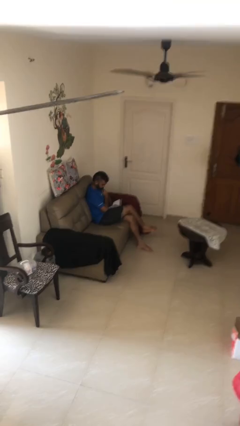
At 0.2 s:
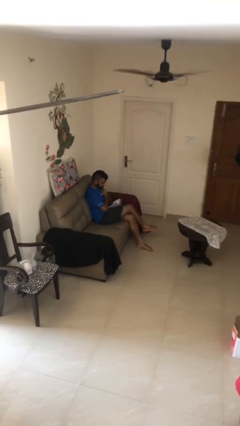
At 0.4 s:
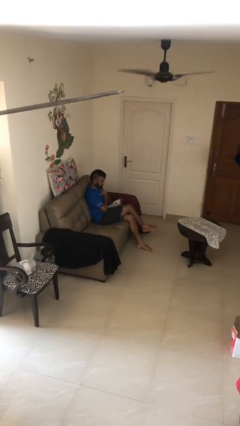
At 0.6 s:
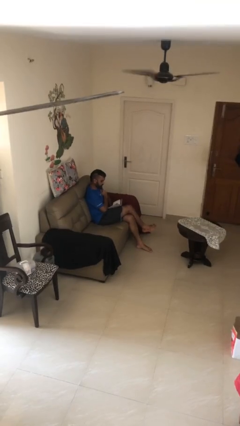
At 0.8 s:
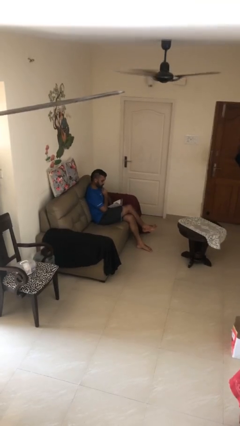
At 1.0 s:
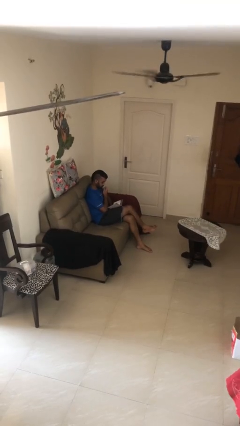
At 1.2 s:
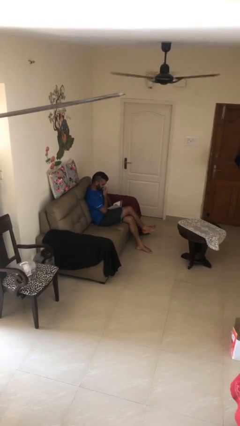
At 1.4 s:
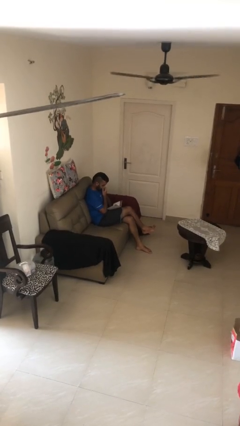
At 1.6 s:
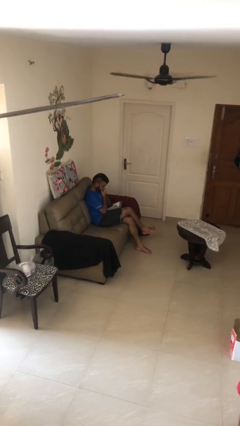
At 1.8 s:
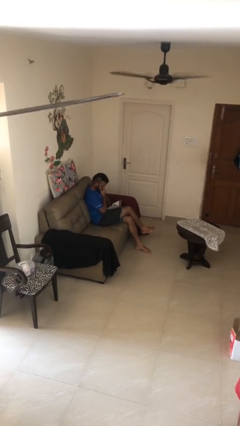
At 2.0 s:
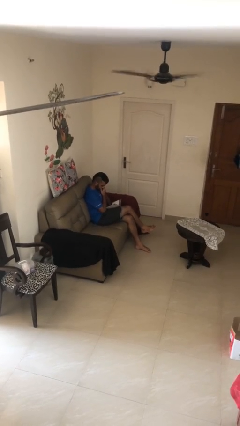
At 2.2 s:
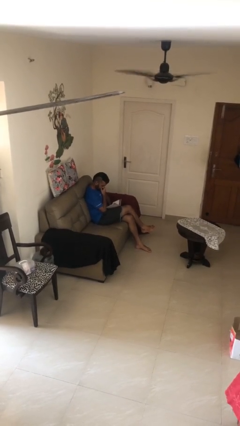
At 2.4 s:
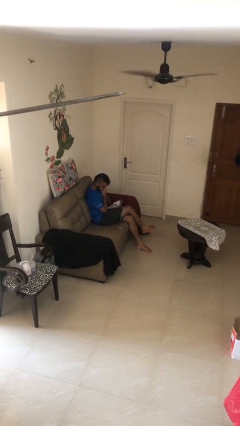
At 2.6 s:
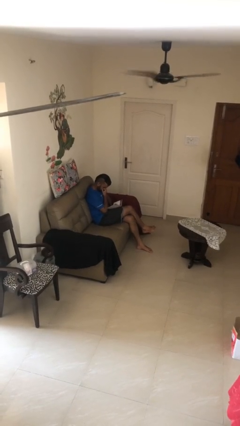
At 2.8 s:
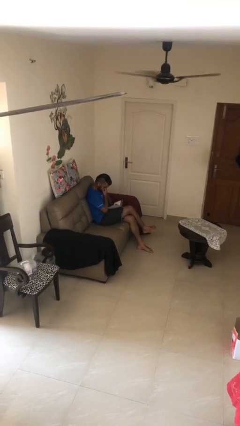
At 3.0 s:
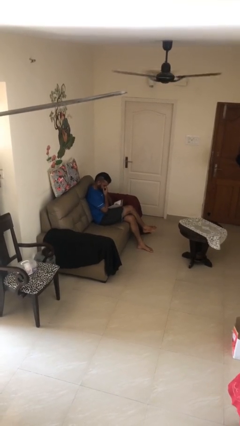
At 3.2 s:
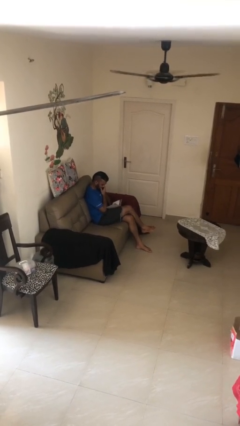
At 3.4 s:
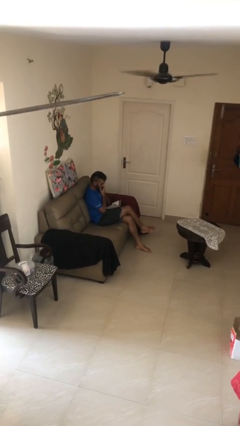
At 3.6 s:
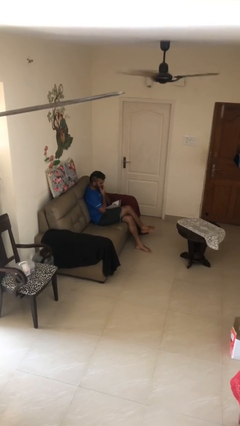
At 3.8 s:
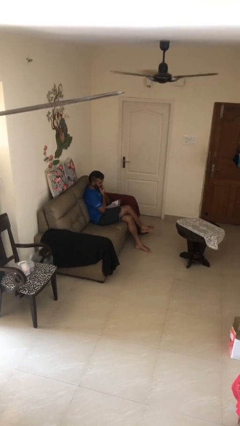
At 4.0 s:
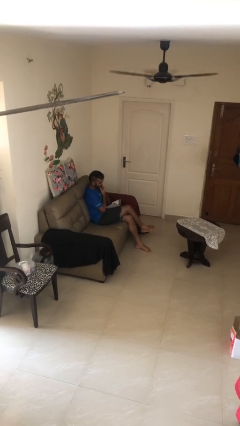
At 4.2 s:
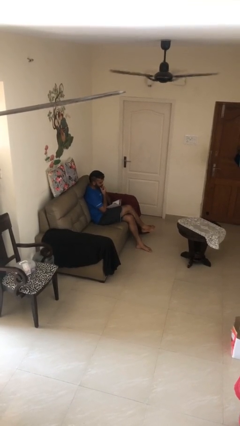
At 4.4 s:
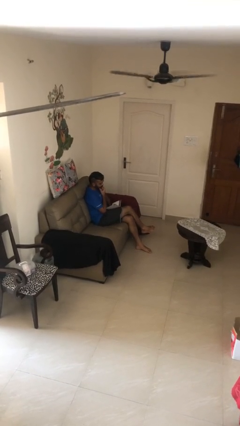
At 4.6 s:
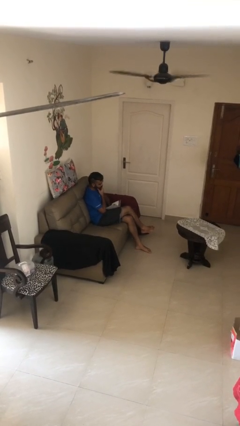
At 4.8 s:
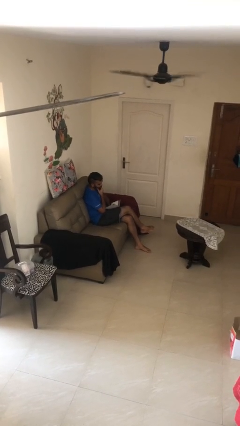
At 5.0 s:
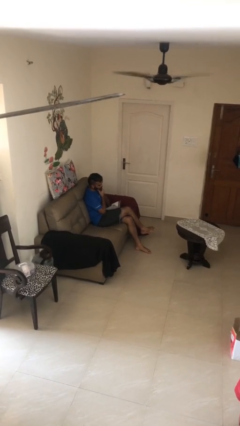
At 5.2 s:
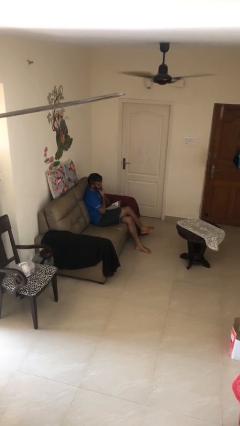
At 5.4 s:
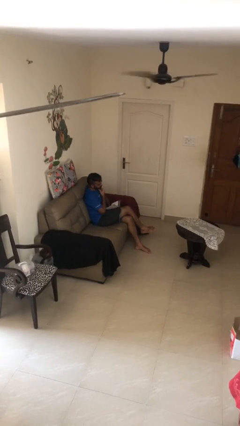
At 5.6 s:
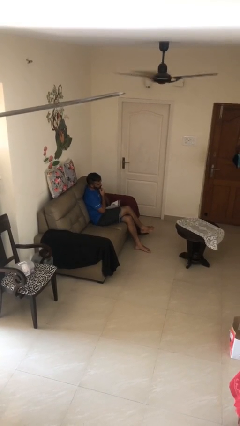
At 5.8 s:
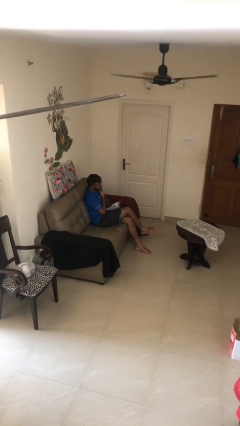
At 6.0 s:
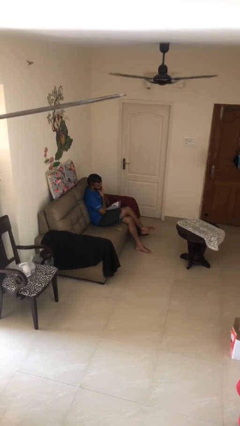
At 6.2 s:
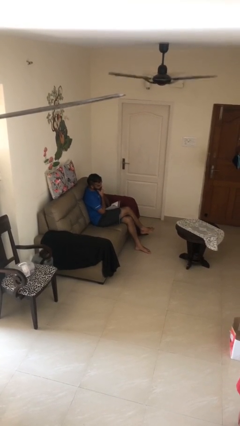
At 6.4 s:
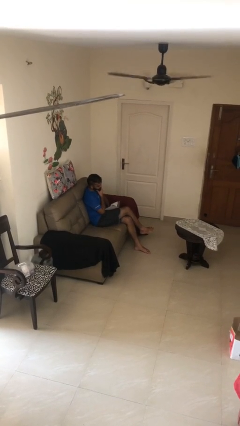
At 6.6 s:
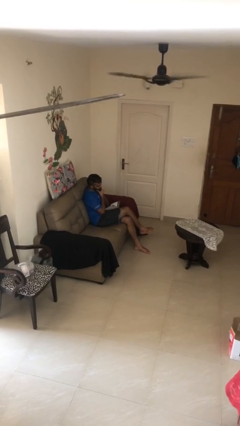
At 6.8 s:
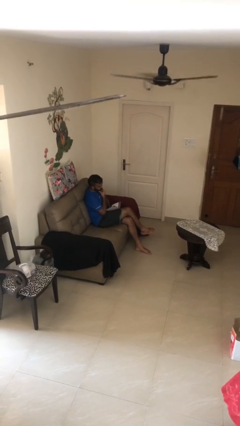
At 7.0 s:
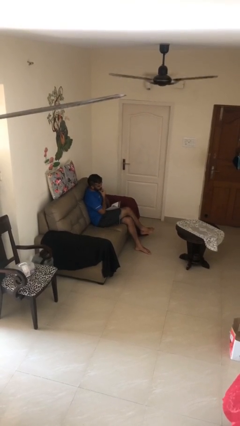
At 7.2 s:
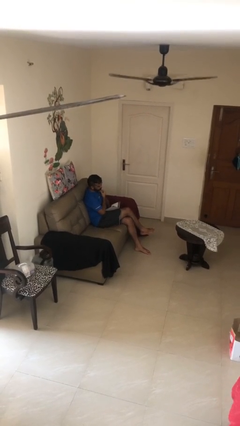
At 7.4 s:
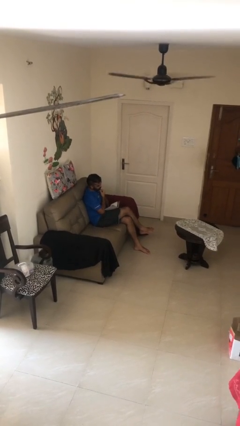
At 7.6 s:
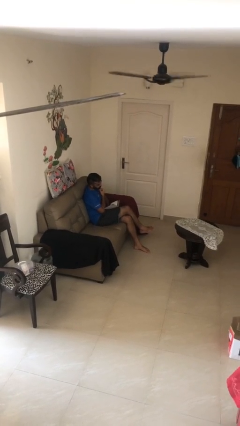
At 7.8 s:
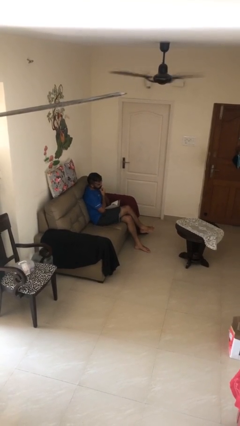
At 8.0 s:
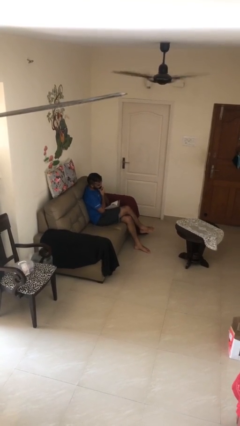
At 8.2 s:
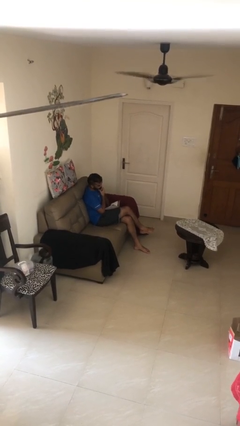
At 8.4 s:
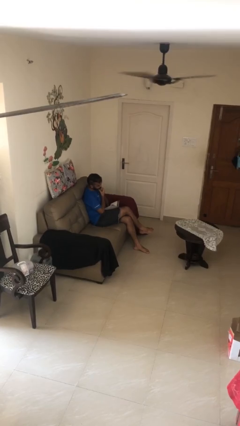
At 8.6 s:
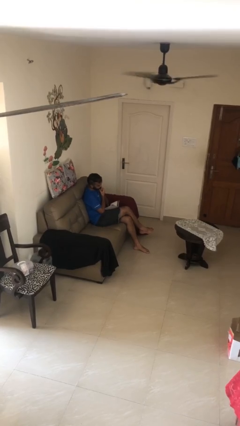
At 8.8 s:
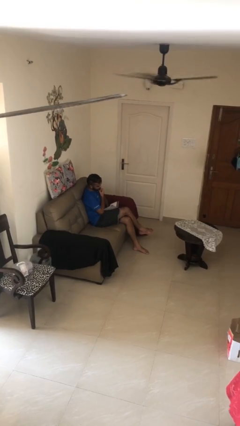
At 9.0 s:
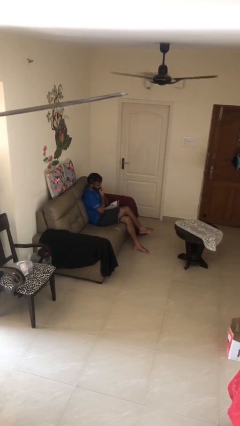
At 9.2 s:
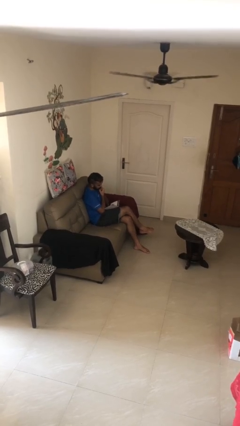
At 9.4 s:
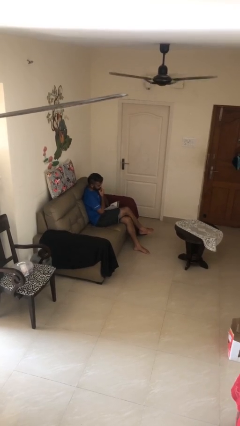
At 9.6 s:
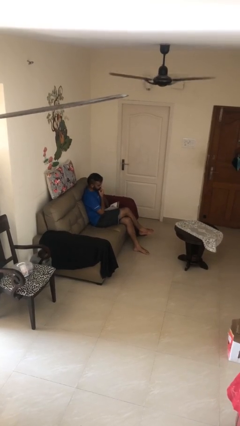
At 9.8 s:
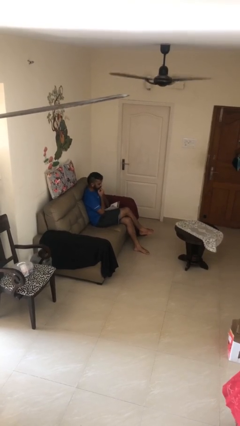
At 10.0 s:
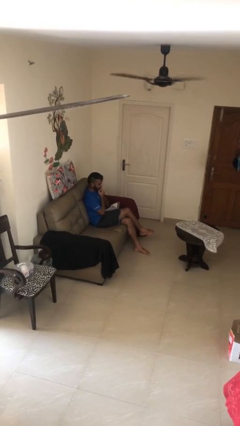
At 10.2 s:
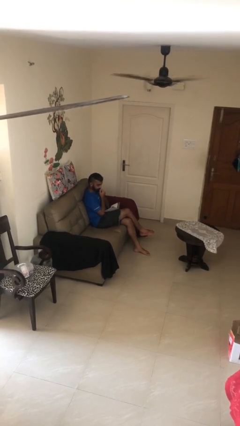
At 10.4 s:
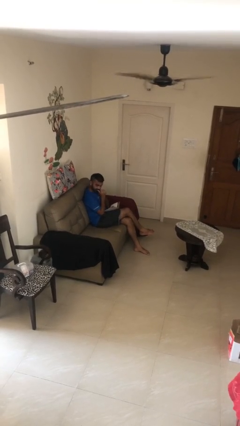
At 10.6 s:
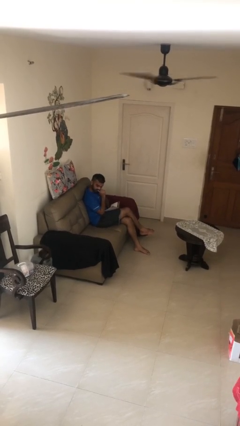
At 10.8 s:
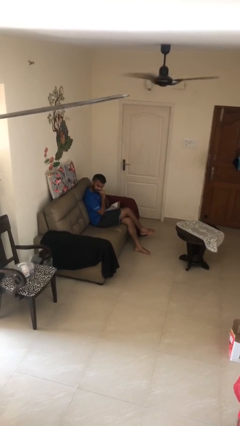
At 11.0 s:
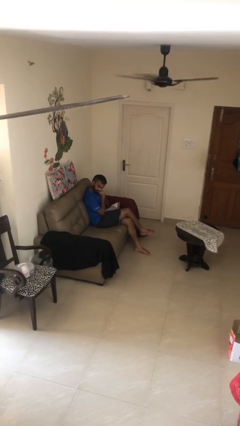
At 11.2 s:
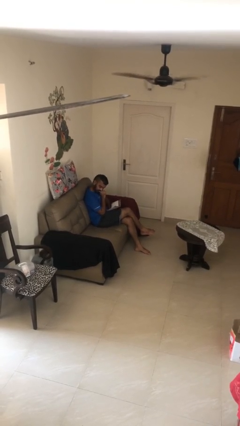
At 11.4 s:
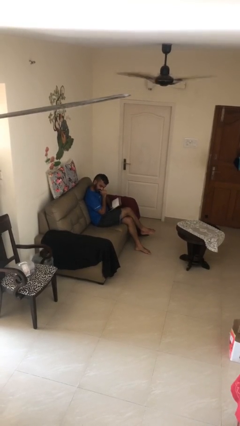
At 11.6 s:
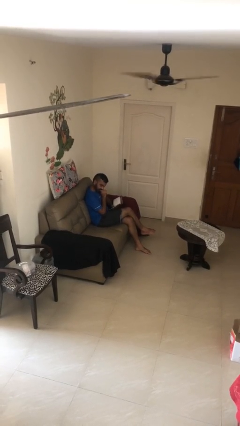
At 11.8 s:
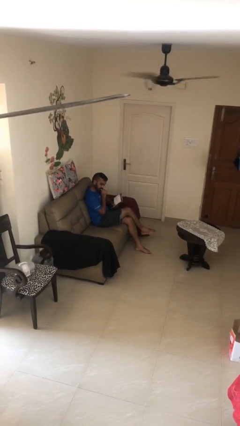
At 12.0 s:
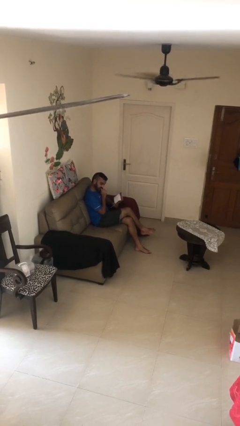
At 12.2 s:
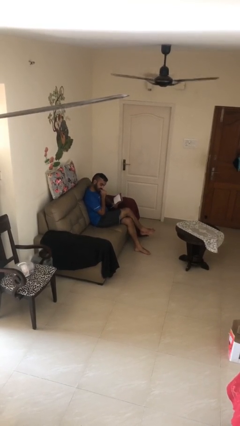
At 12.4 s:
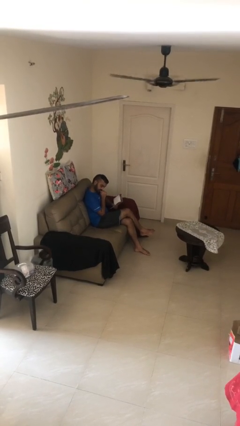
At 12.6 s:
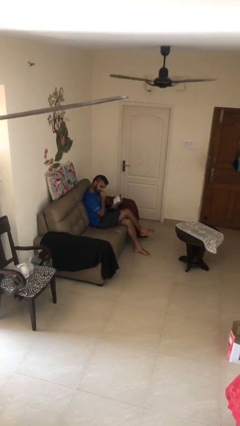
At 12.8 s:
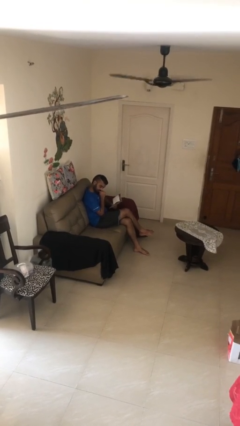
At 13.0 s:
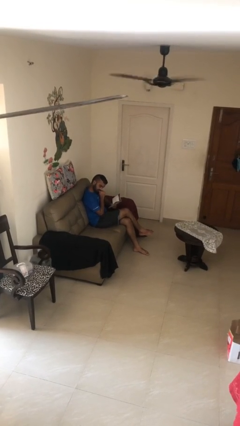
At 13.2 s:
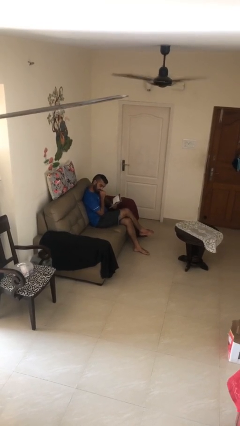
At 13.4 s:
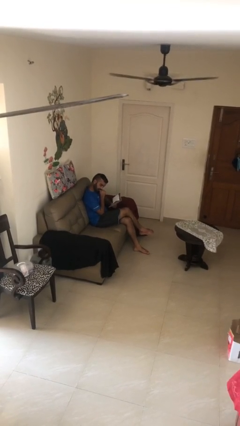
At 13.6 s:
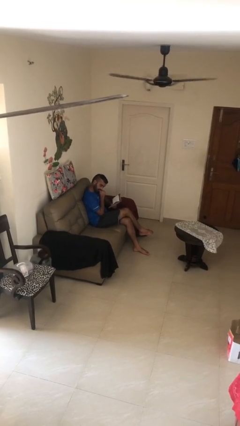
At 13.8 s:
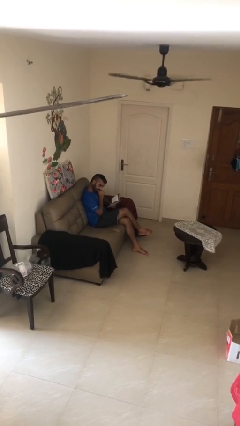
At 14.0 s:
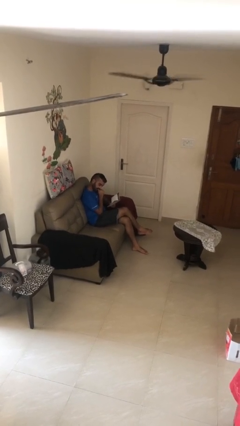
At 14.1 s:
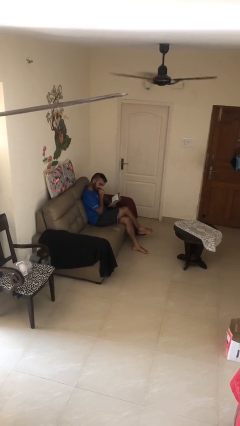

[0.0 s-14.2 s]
person reads document

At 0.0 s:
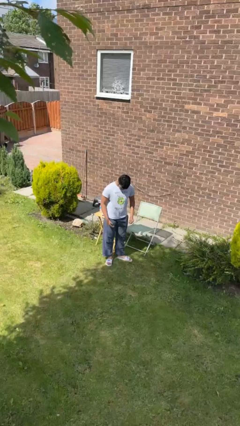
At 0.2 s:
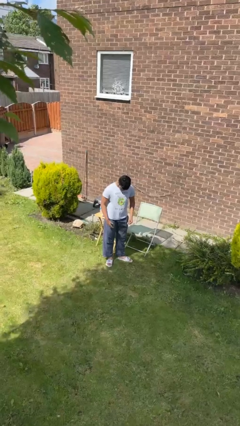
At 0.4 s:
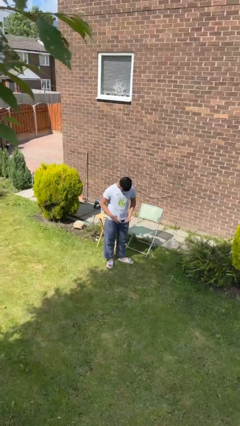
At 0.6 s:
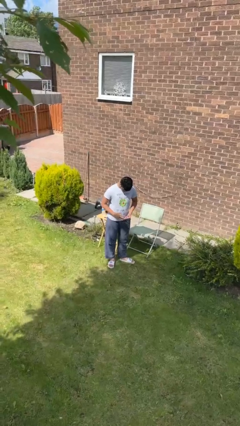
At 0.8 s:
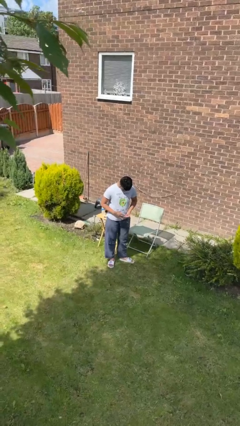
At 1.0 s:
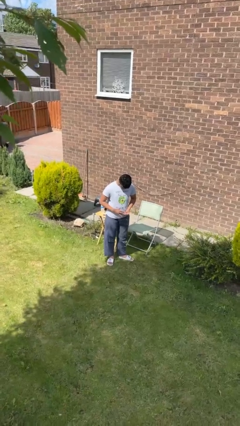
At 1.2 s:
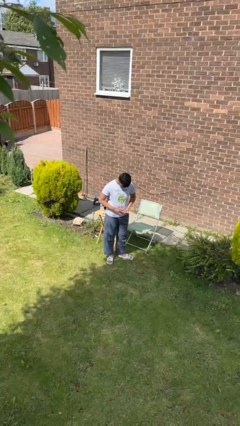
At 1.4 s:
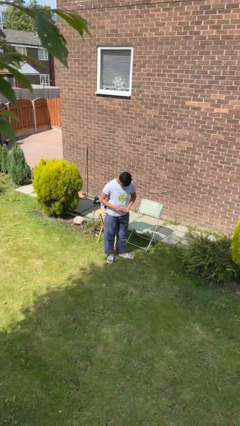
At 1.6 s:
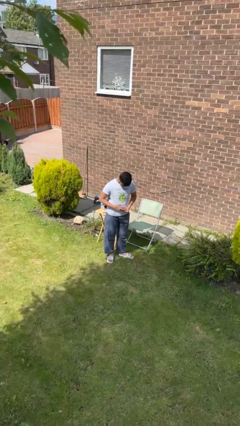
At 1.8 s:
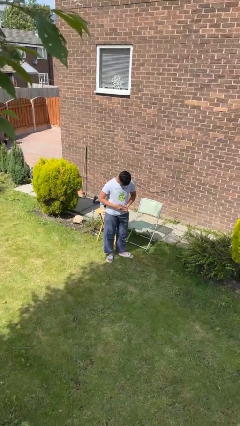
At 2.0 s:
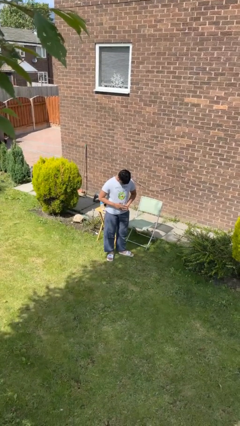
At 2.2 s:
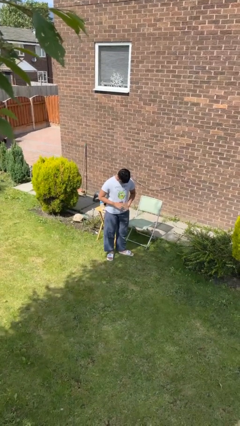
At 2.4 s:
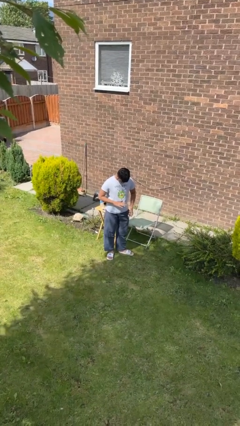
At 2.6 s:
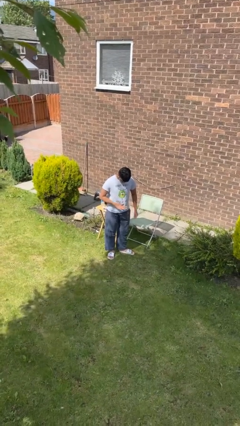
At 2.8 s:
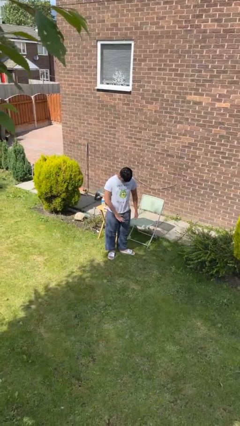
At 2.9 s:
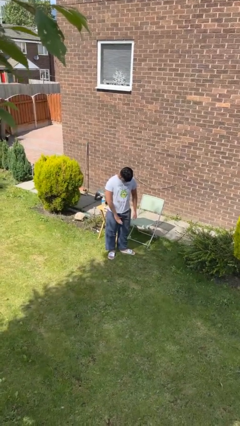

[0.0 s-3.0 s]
person puts on ring

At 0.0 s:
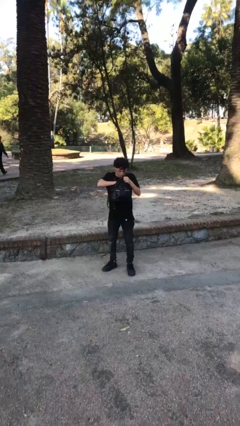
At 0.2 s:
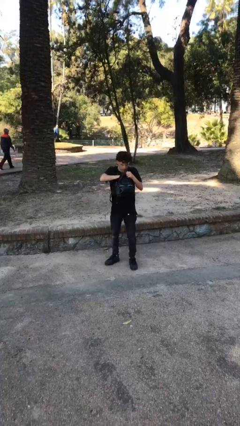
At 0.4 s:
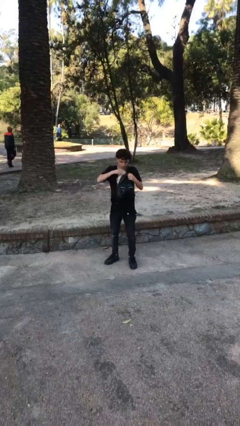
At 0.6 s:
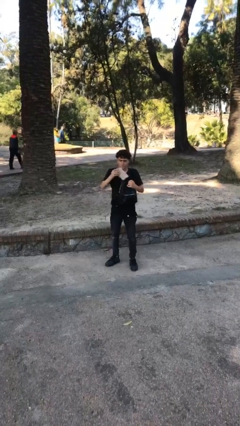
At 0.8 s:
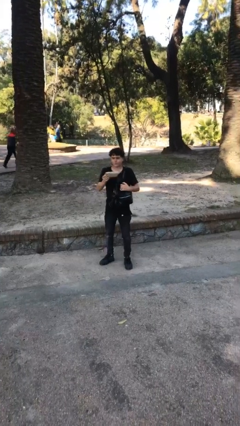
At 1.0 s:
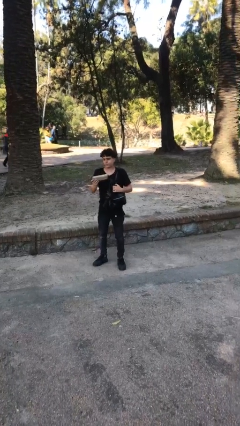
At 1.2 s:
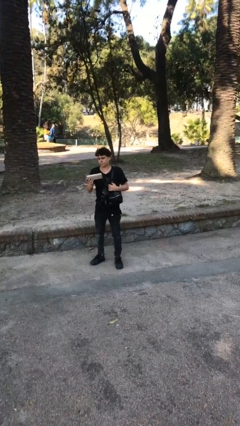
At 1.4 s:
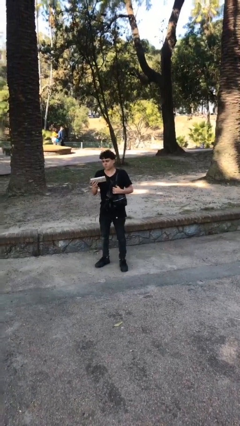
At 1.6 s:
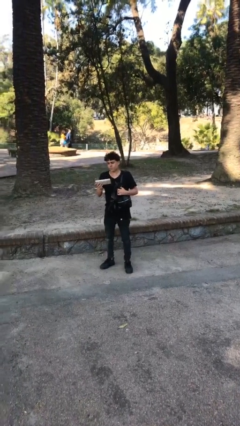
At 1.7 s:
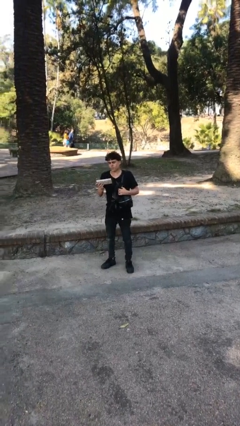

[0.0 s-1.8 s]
person takes object from purse
